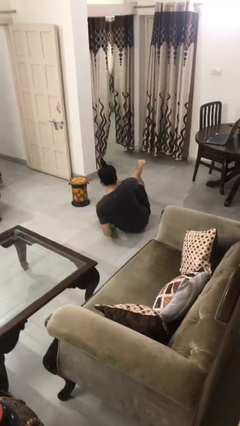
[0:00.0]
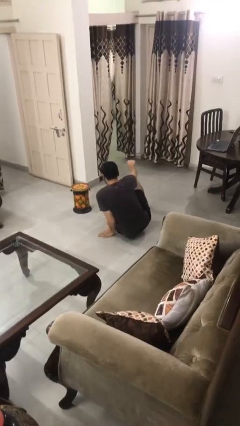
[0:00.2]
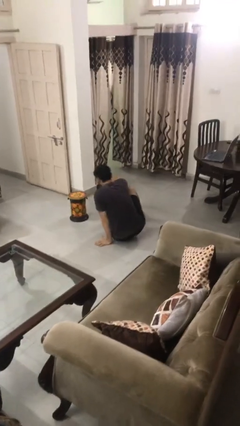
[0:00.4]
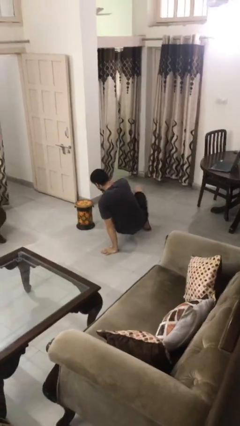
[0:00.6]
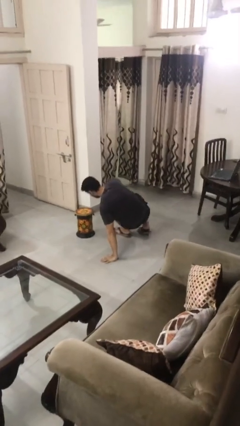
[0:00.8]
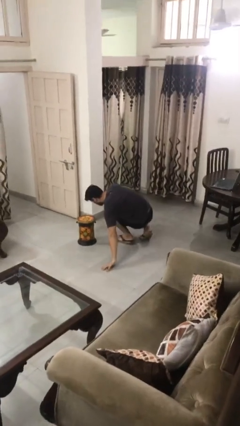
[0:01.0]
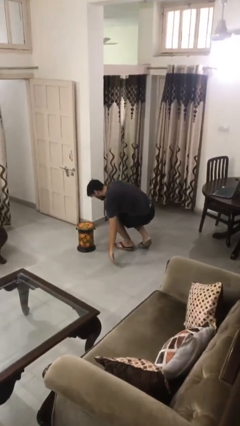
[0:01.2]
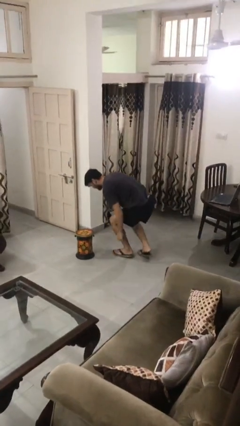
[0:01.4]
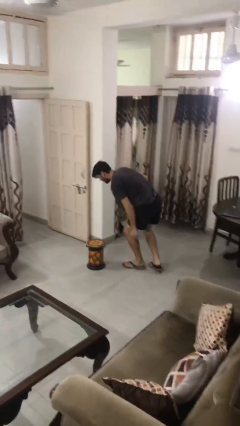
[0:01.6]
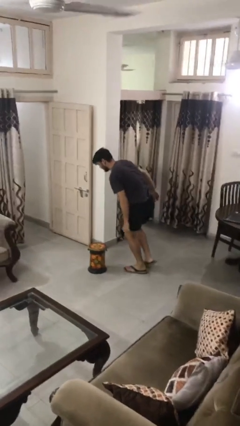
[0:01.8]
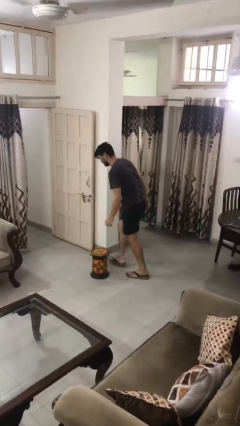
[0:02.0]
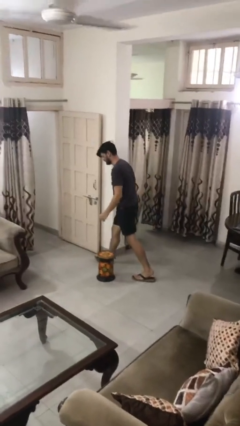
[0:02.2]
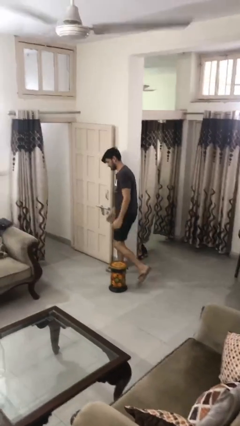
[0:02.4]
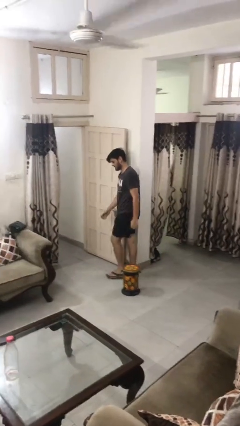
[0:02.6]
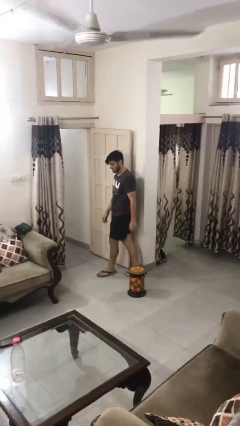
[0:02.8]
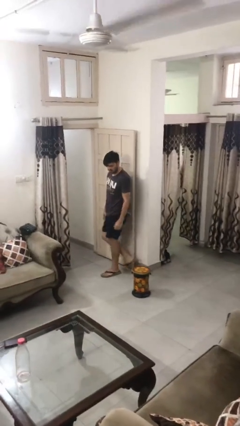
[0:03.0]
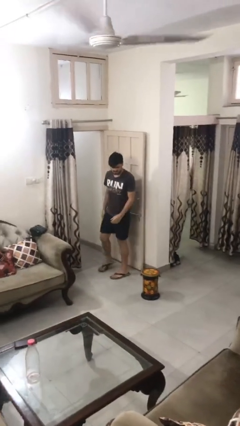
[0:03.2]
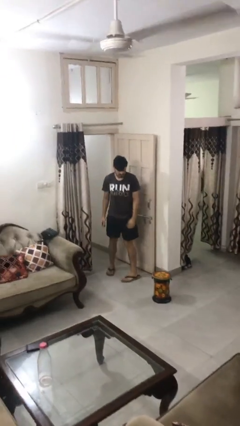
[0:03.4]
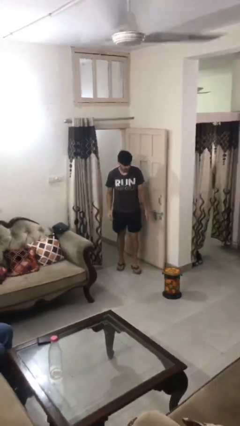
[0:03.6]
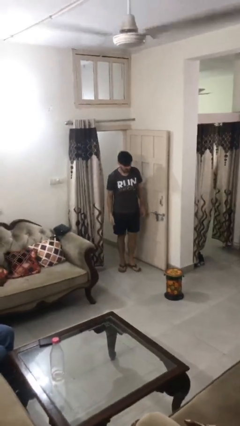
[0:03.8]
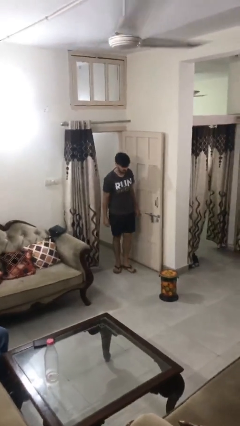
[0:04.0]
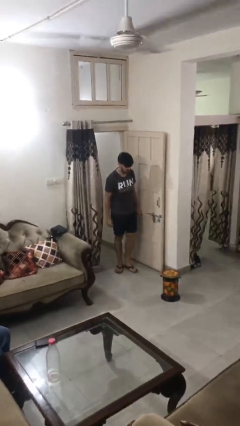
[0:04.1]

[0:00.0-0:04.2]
person stands up from floor

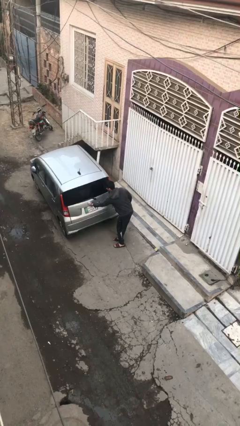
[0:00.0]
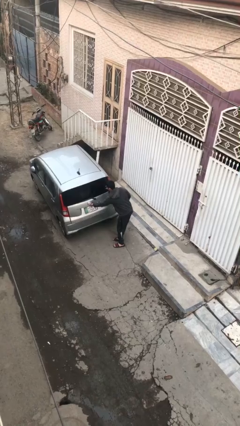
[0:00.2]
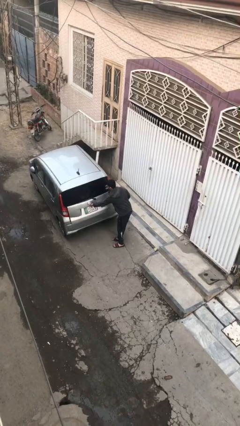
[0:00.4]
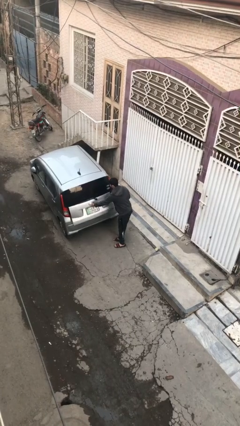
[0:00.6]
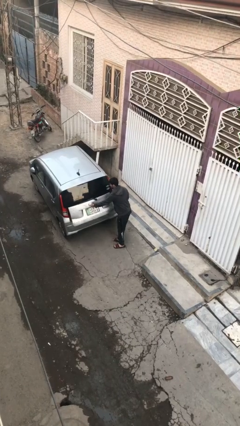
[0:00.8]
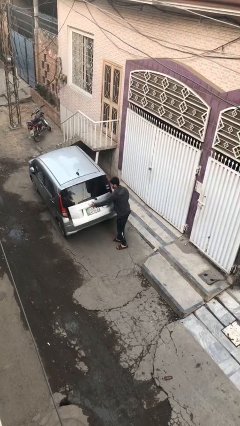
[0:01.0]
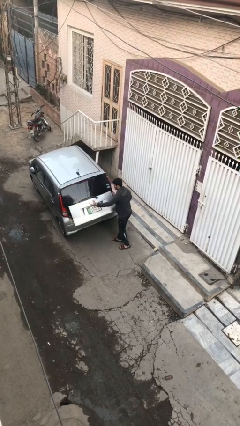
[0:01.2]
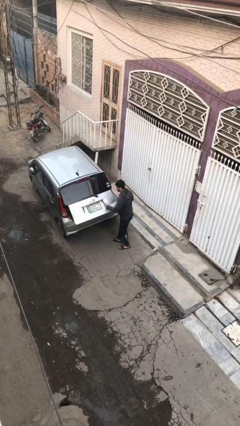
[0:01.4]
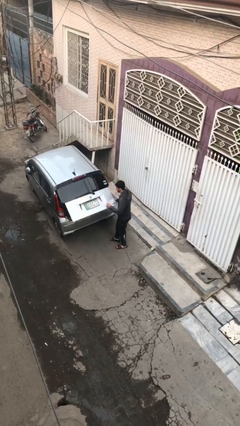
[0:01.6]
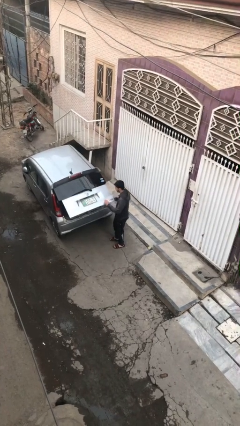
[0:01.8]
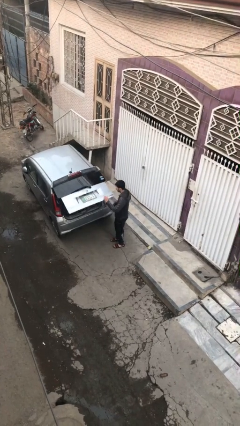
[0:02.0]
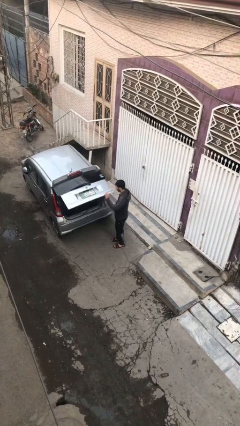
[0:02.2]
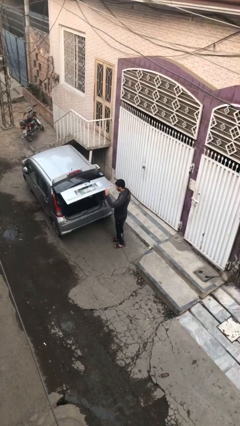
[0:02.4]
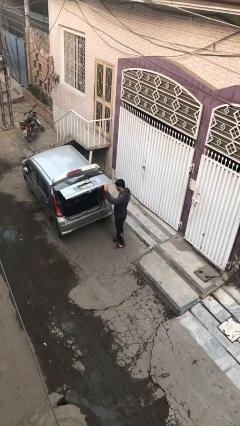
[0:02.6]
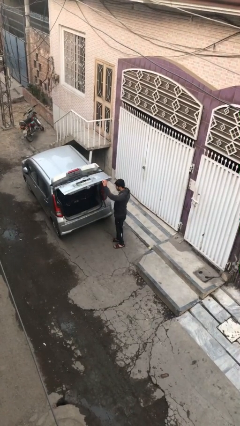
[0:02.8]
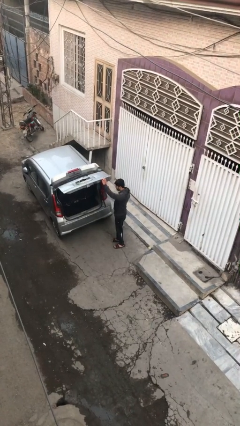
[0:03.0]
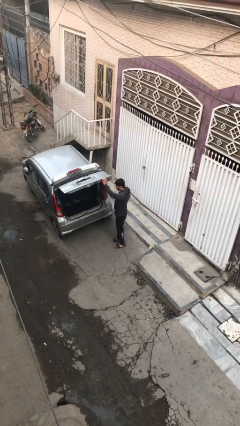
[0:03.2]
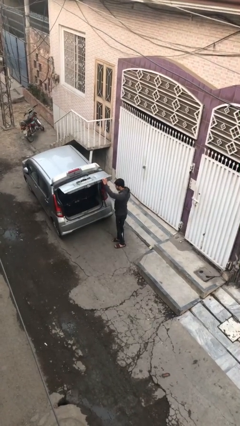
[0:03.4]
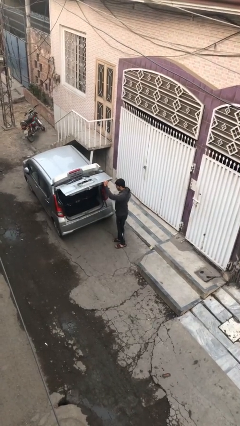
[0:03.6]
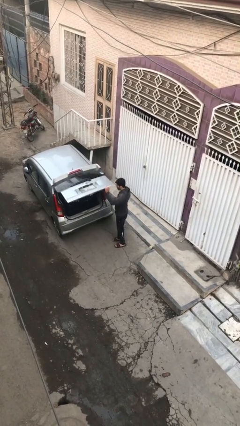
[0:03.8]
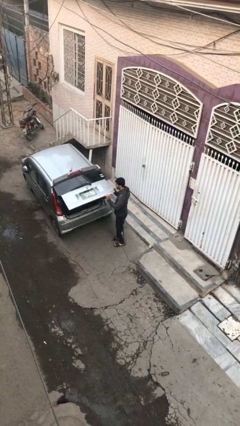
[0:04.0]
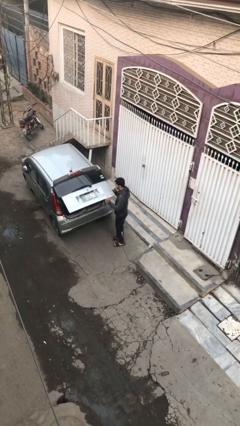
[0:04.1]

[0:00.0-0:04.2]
person opens car trunk

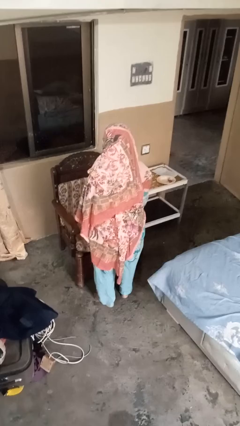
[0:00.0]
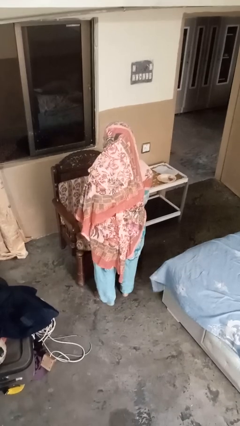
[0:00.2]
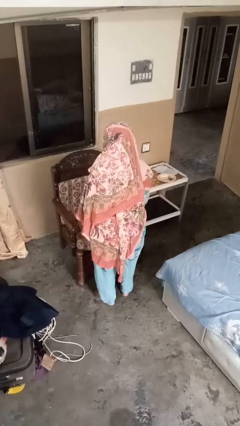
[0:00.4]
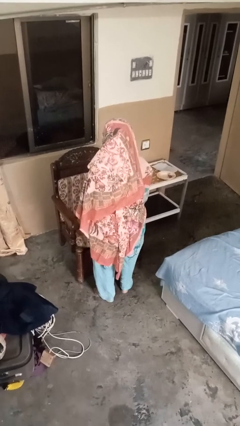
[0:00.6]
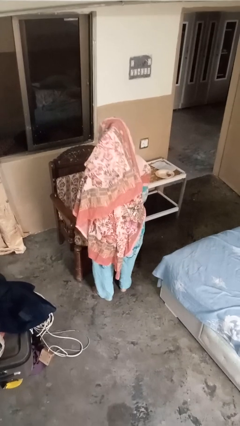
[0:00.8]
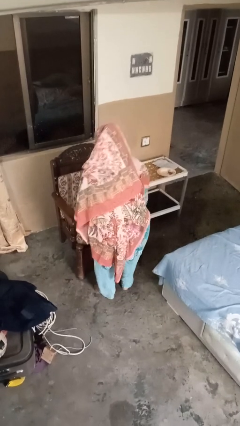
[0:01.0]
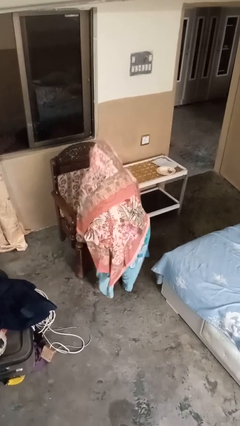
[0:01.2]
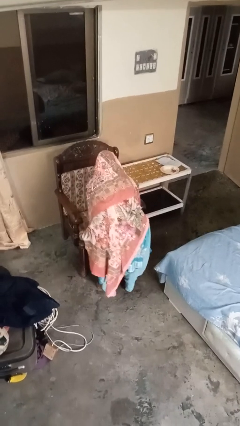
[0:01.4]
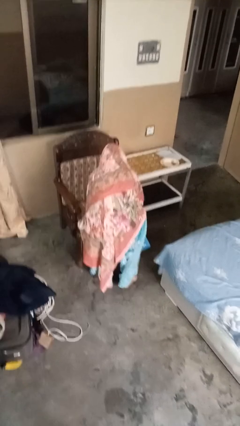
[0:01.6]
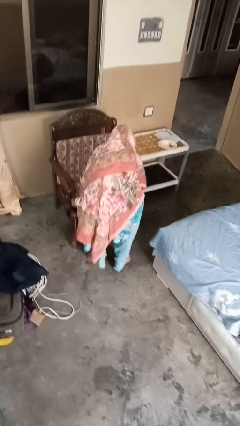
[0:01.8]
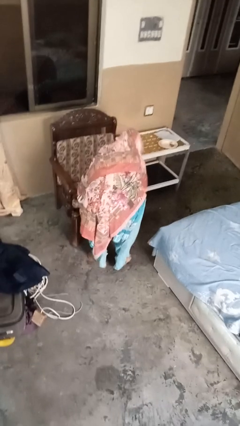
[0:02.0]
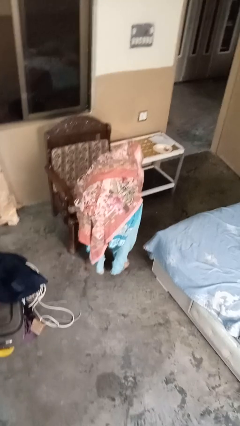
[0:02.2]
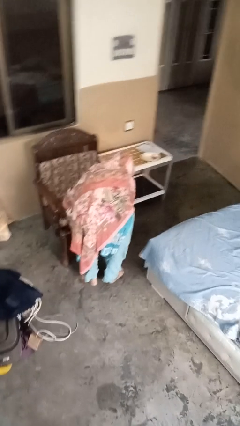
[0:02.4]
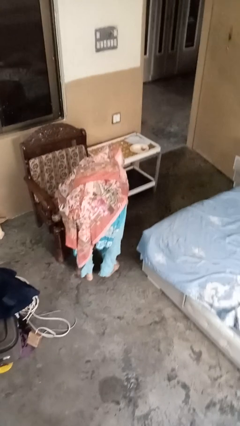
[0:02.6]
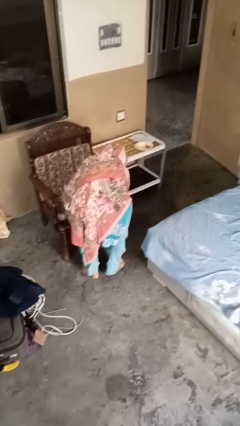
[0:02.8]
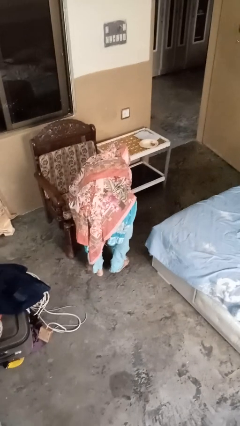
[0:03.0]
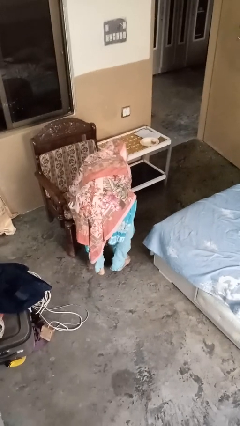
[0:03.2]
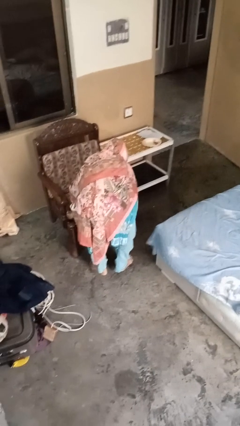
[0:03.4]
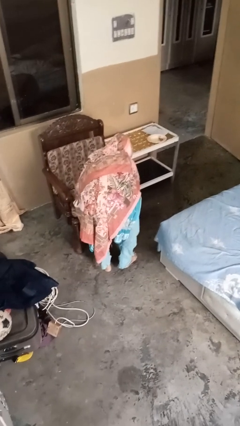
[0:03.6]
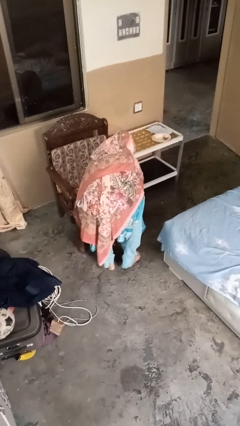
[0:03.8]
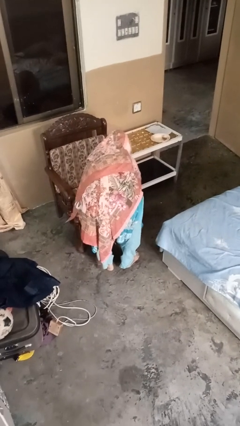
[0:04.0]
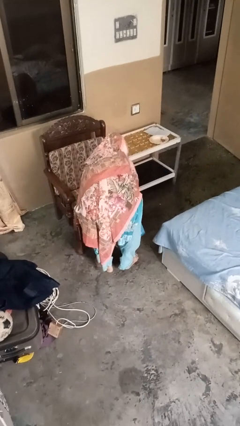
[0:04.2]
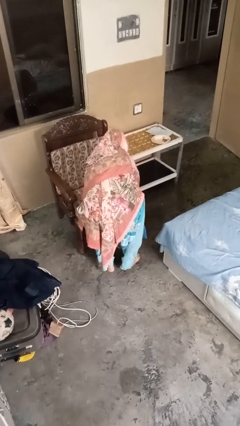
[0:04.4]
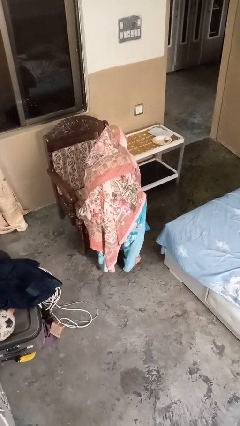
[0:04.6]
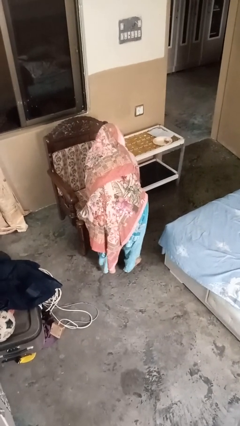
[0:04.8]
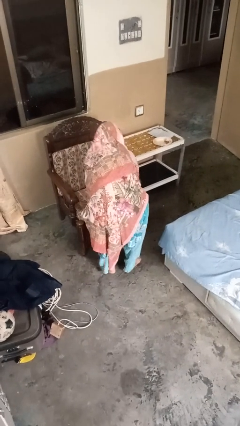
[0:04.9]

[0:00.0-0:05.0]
person searches under couch

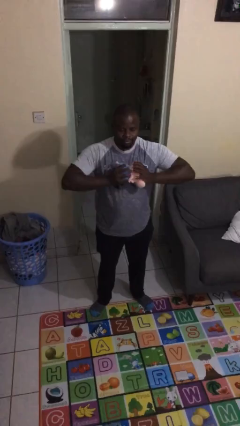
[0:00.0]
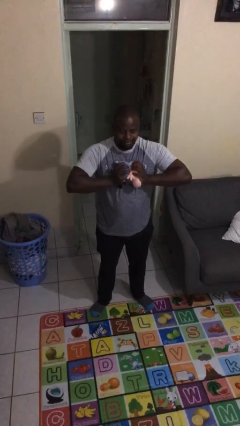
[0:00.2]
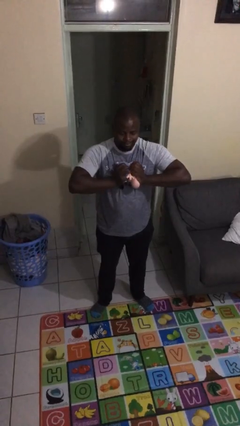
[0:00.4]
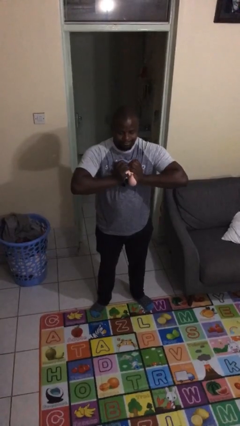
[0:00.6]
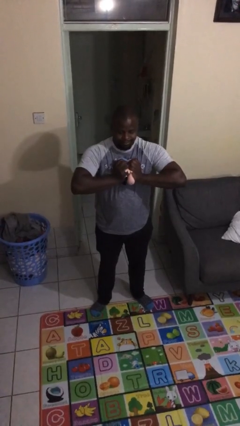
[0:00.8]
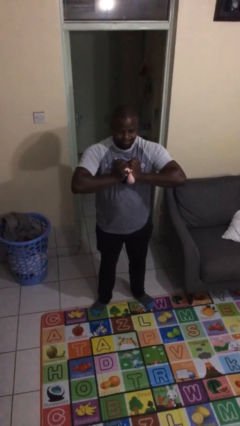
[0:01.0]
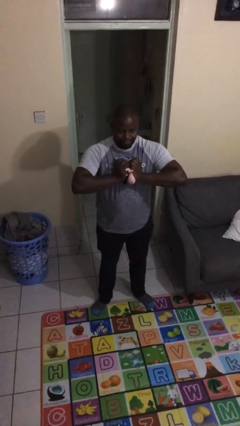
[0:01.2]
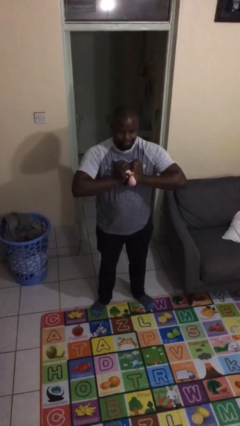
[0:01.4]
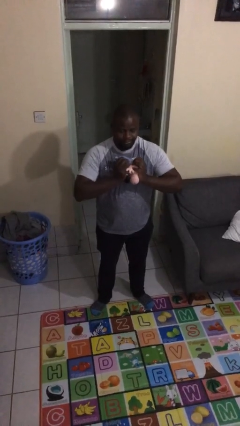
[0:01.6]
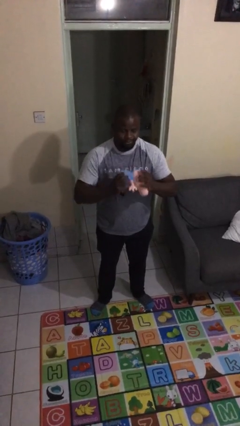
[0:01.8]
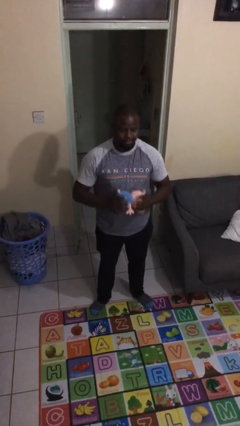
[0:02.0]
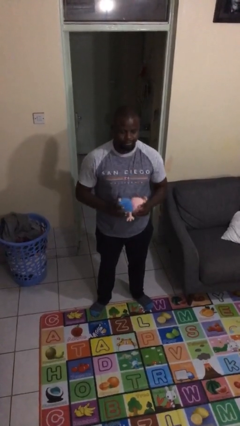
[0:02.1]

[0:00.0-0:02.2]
person squeezes object

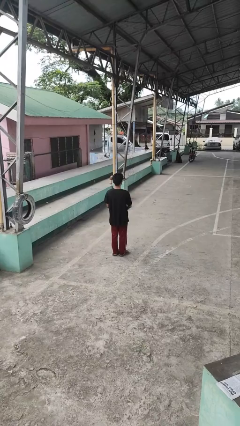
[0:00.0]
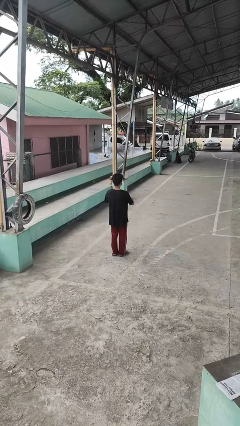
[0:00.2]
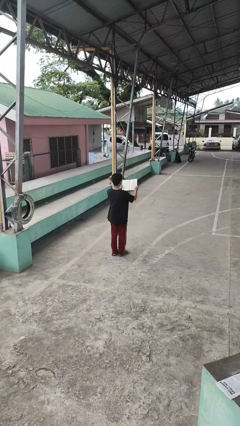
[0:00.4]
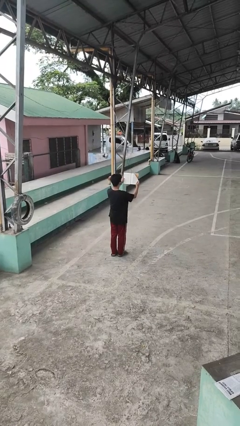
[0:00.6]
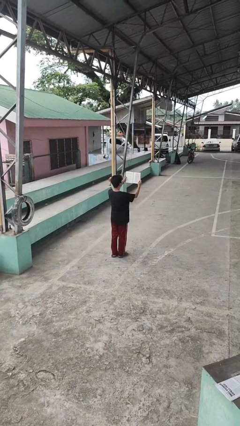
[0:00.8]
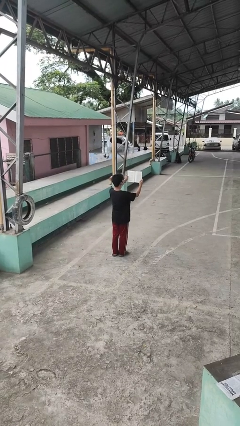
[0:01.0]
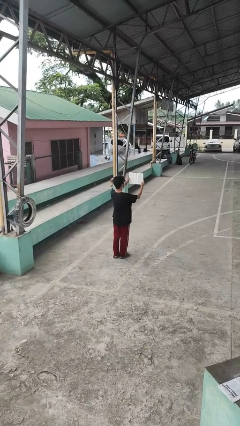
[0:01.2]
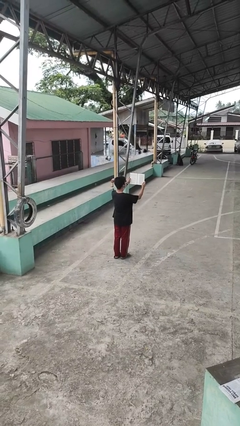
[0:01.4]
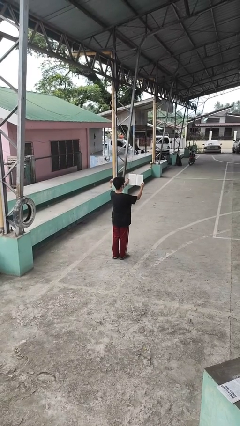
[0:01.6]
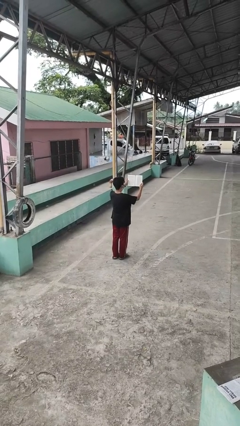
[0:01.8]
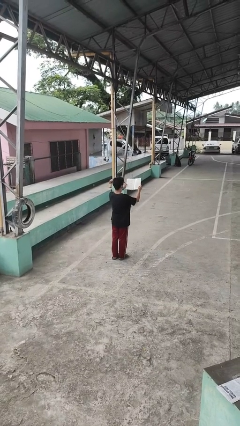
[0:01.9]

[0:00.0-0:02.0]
person reads book

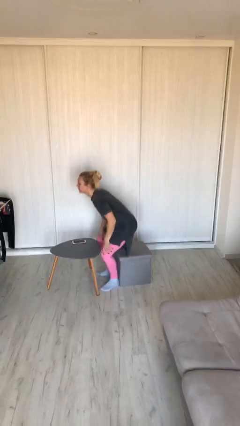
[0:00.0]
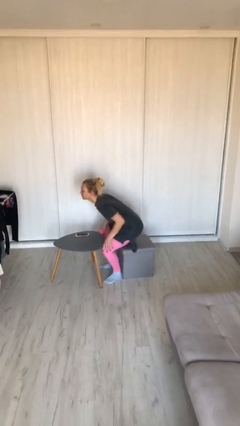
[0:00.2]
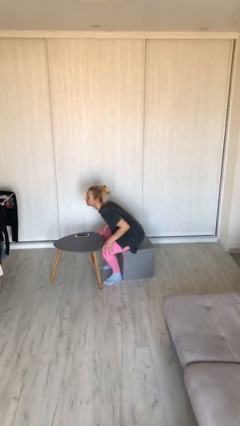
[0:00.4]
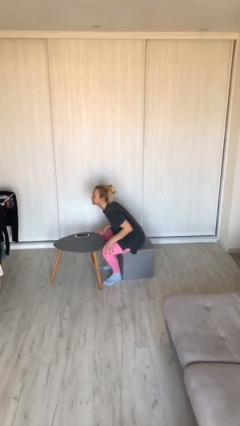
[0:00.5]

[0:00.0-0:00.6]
person sits down
